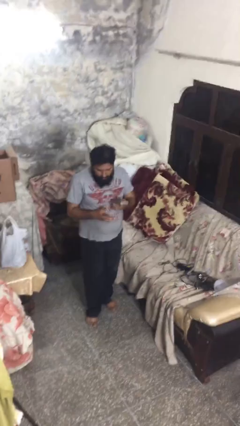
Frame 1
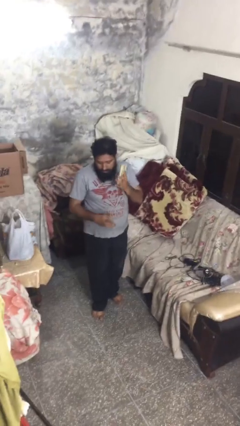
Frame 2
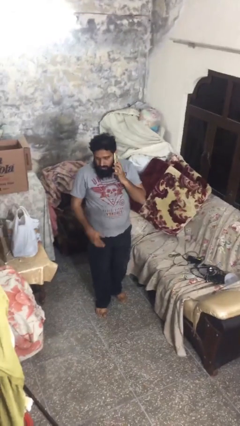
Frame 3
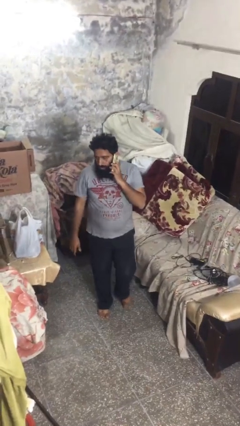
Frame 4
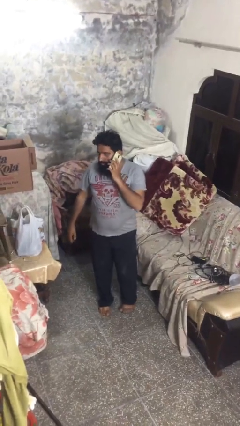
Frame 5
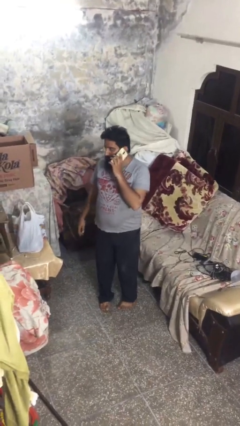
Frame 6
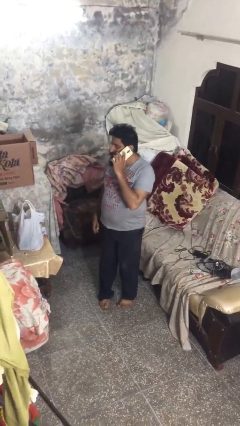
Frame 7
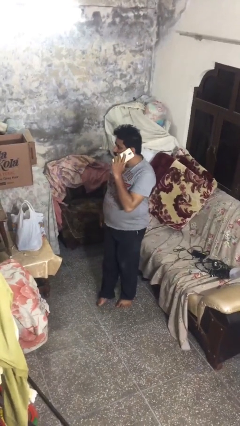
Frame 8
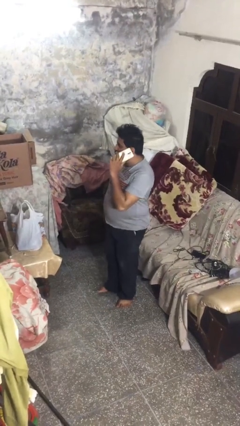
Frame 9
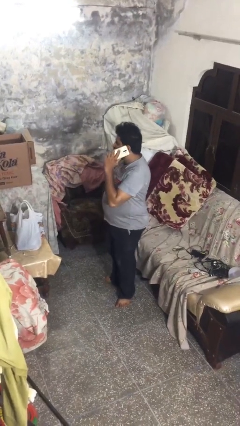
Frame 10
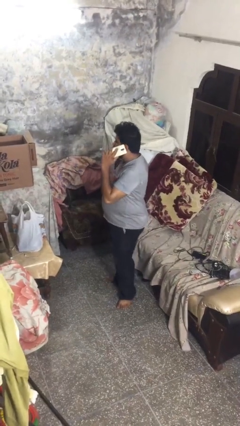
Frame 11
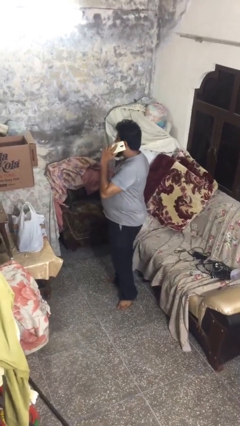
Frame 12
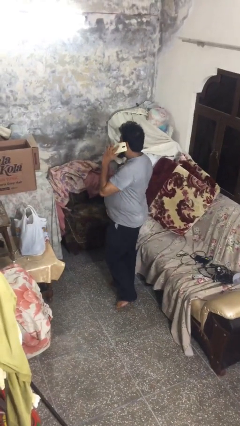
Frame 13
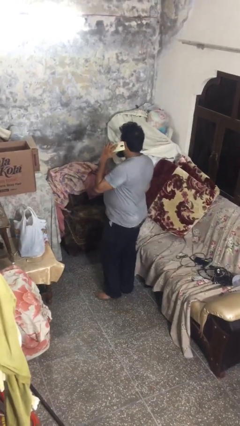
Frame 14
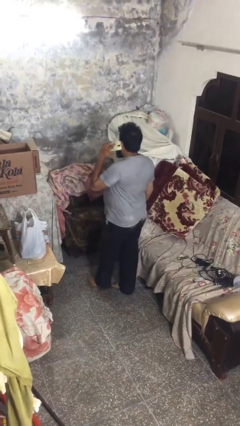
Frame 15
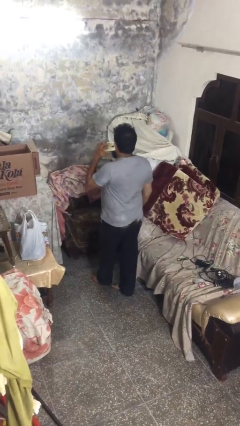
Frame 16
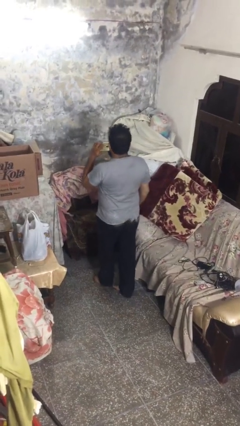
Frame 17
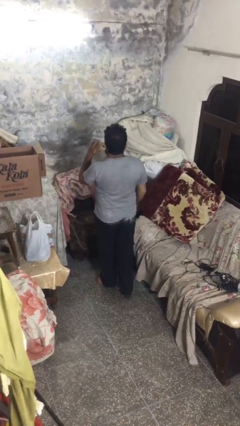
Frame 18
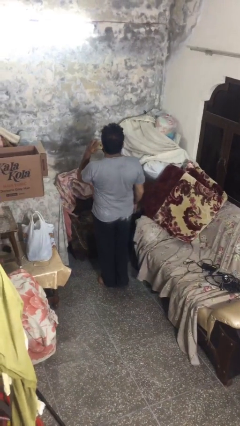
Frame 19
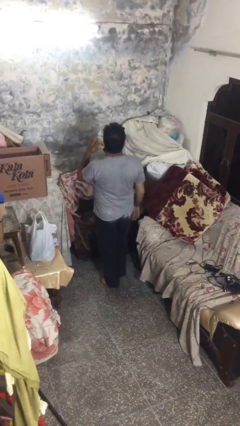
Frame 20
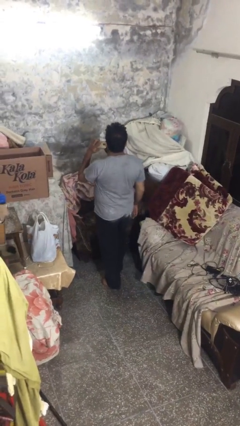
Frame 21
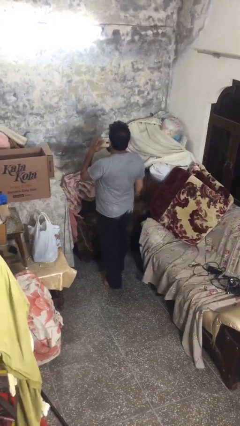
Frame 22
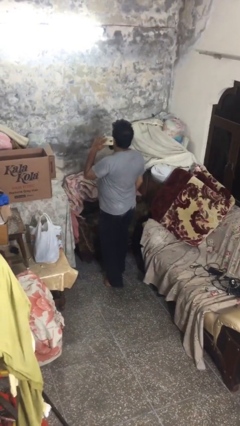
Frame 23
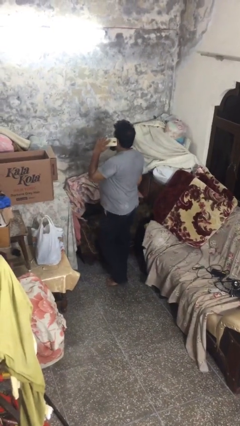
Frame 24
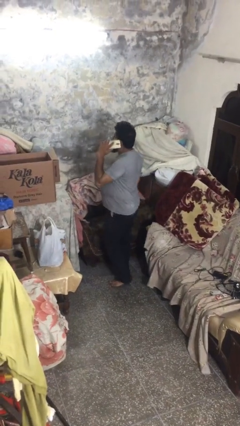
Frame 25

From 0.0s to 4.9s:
person talks on phone

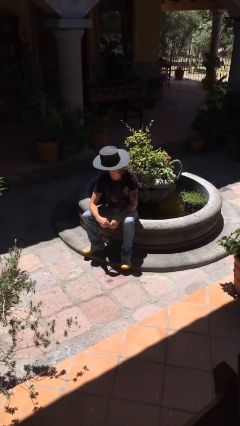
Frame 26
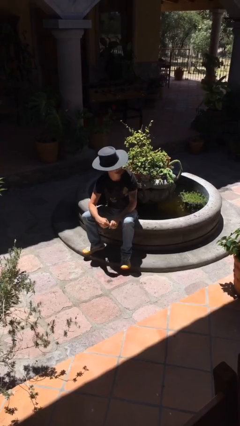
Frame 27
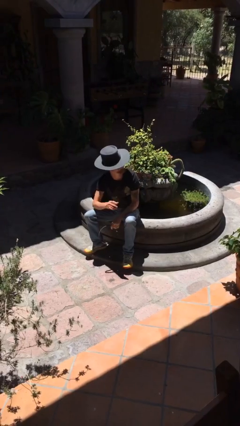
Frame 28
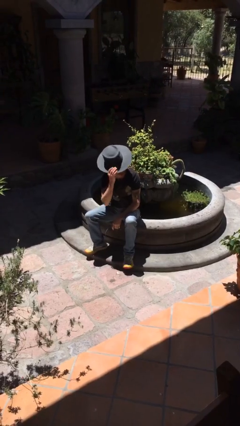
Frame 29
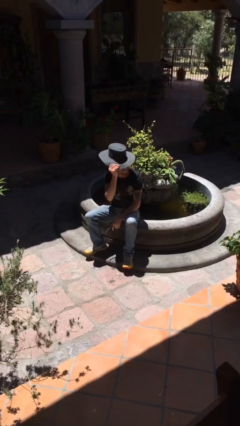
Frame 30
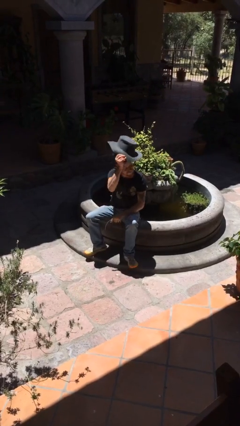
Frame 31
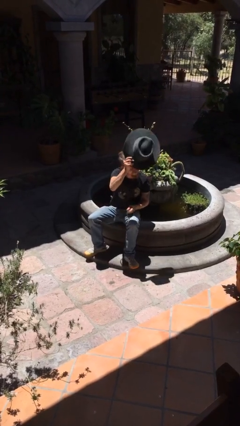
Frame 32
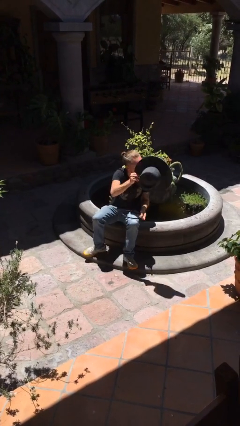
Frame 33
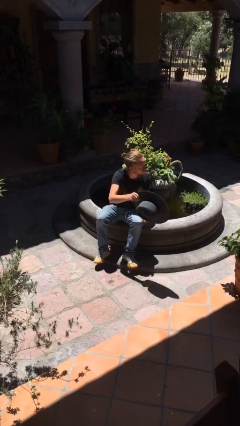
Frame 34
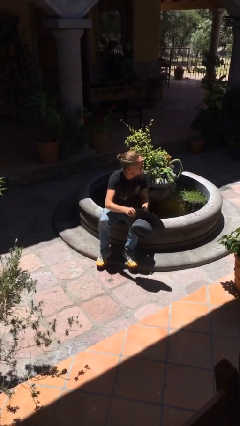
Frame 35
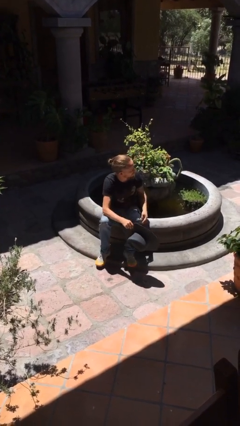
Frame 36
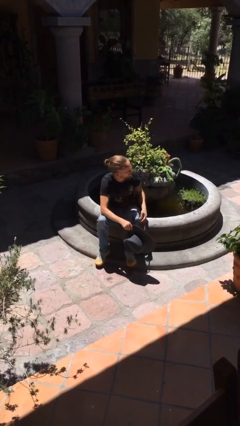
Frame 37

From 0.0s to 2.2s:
person takes off hat

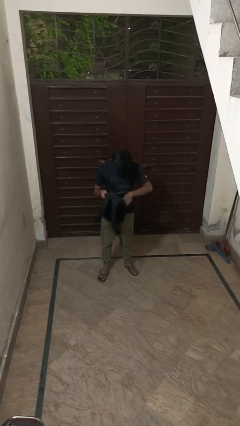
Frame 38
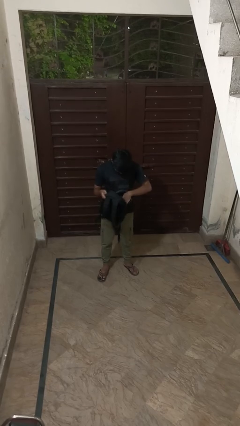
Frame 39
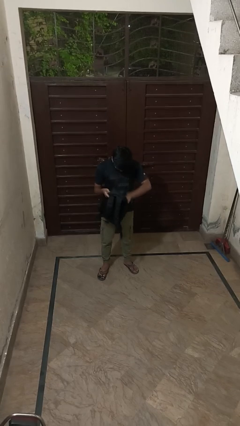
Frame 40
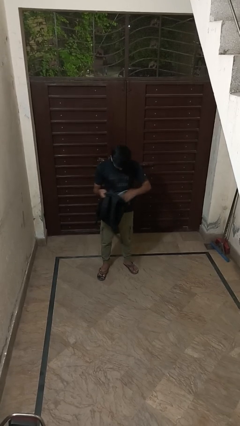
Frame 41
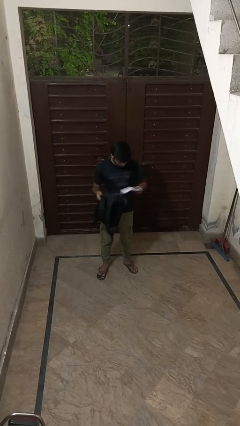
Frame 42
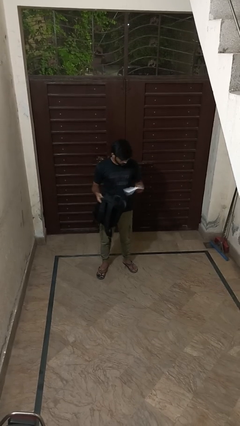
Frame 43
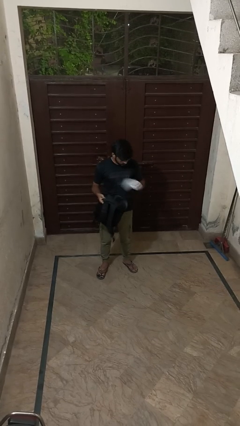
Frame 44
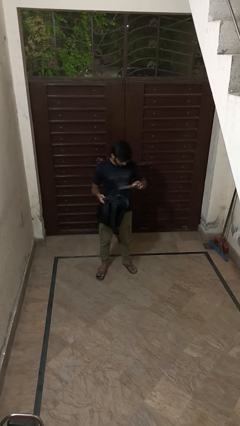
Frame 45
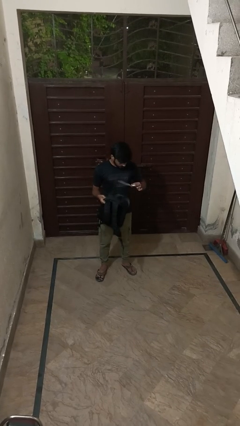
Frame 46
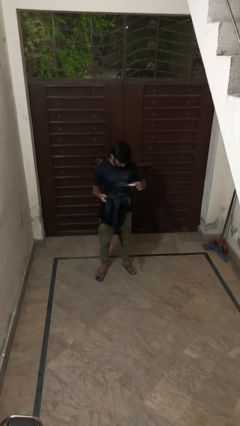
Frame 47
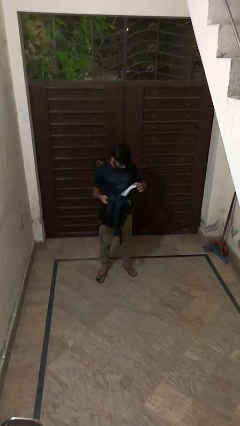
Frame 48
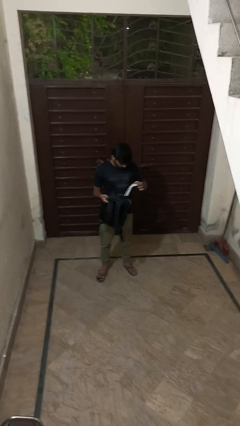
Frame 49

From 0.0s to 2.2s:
person takes object from backpack

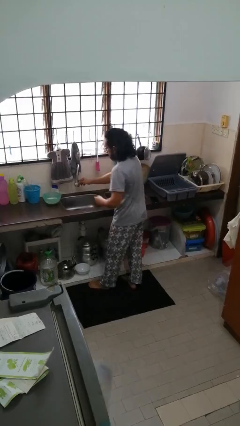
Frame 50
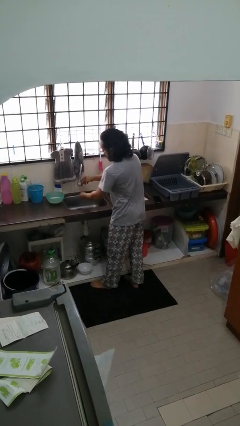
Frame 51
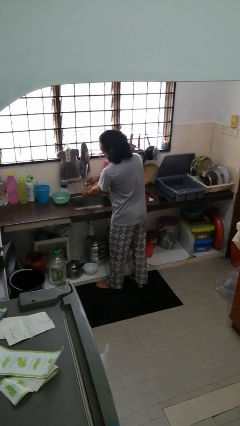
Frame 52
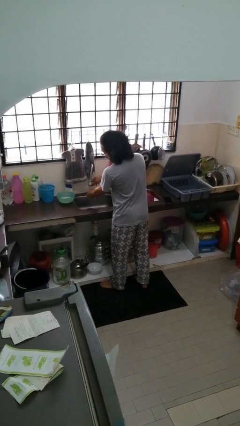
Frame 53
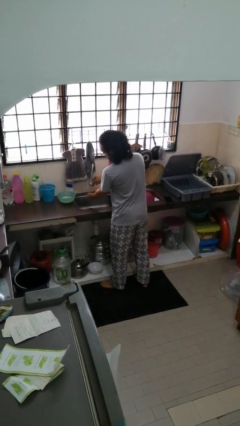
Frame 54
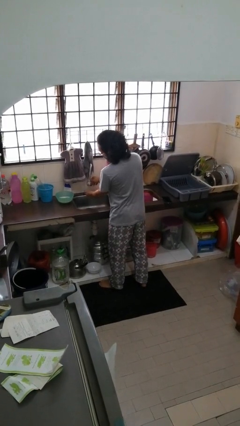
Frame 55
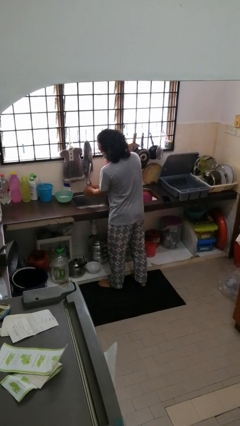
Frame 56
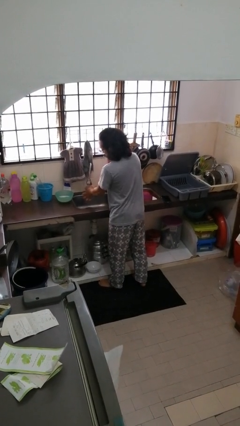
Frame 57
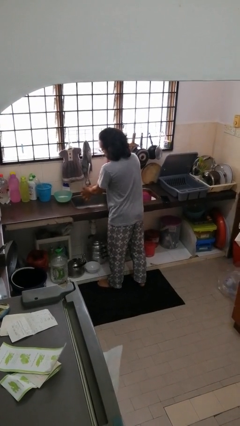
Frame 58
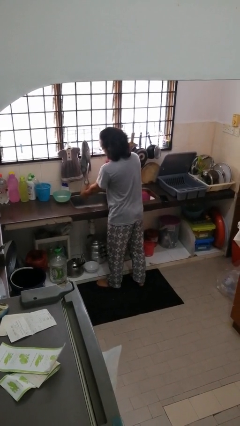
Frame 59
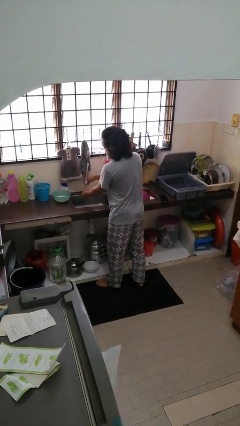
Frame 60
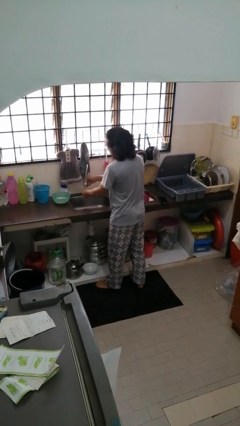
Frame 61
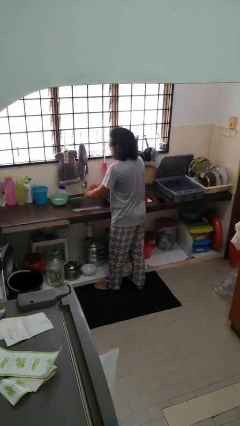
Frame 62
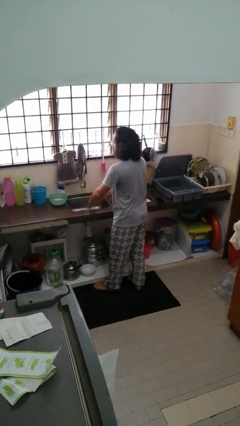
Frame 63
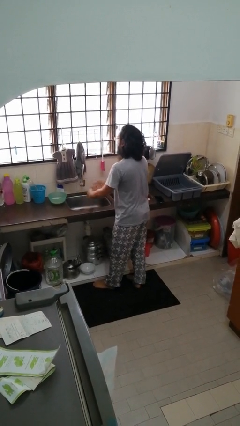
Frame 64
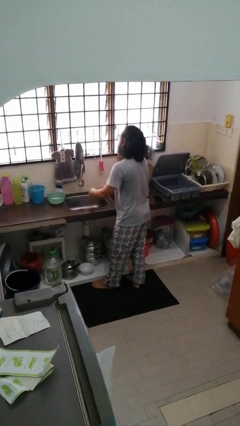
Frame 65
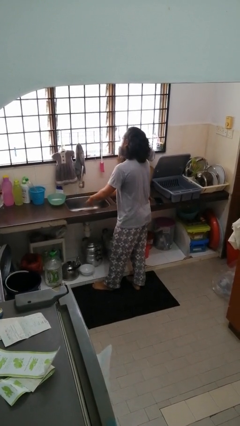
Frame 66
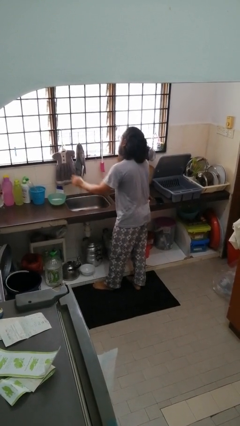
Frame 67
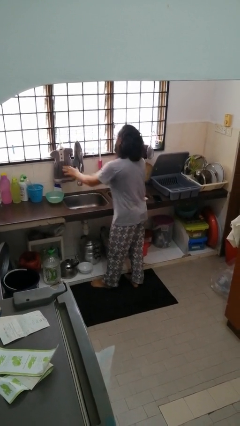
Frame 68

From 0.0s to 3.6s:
person washes hands

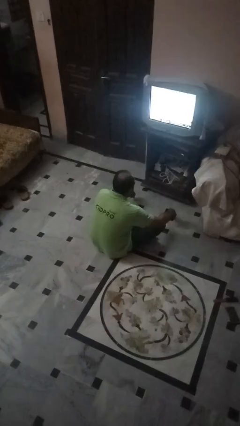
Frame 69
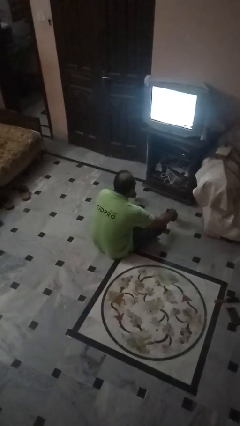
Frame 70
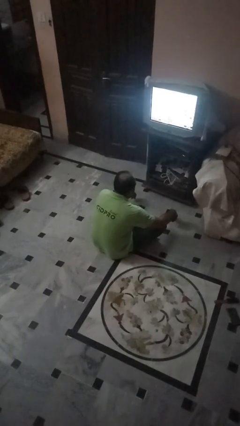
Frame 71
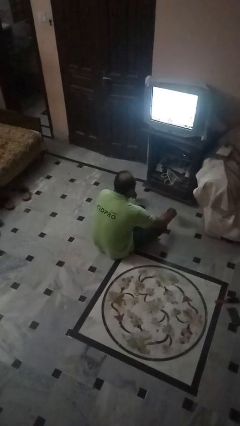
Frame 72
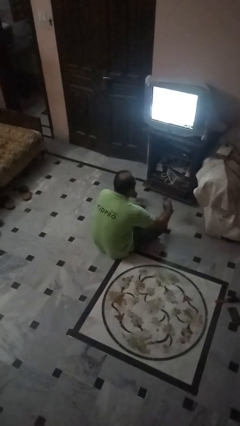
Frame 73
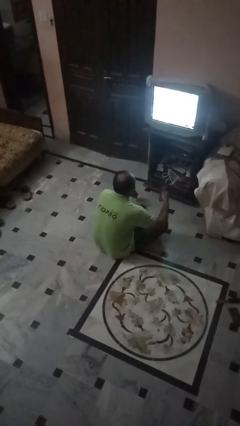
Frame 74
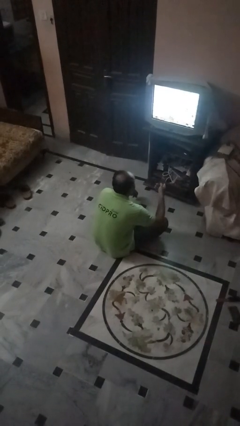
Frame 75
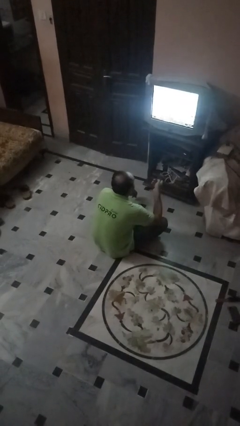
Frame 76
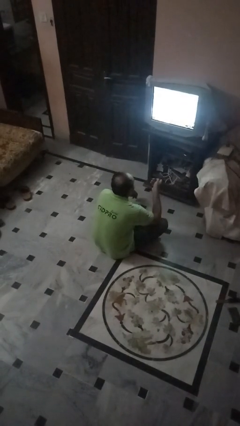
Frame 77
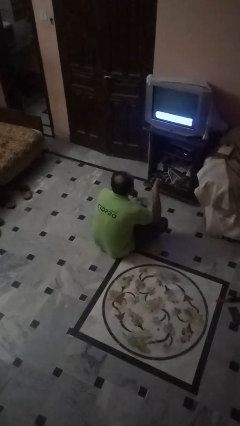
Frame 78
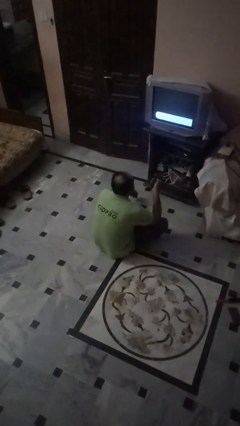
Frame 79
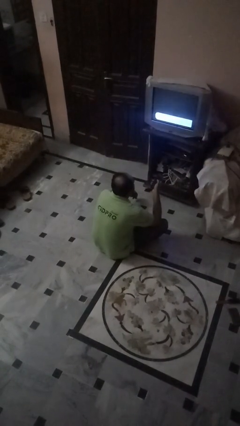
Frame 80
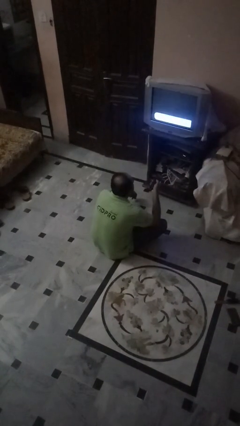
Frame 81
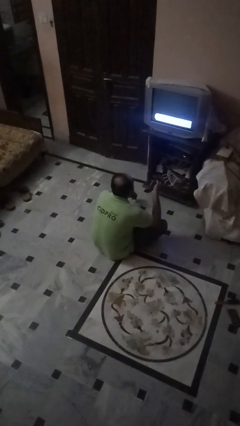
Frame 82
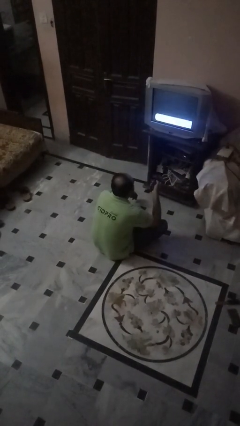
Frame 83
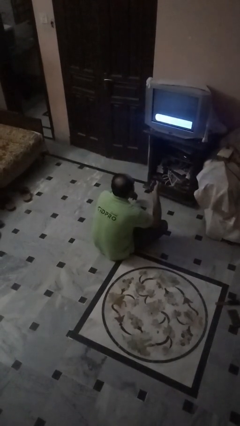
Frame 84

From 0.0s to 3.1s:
person uses television remote

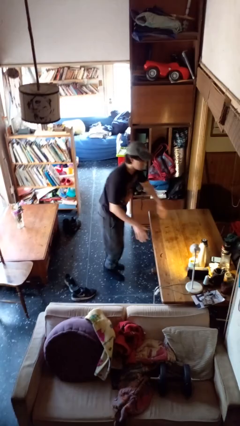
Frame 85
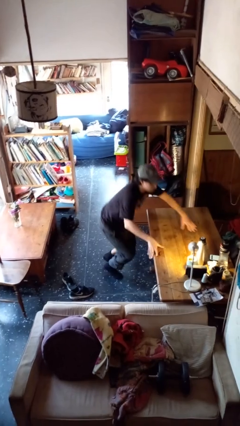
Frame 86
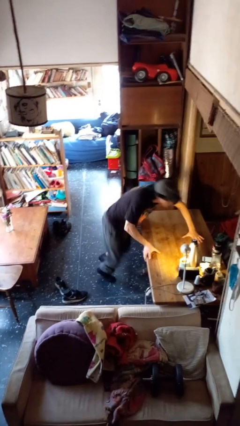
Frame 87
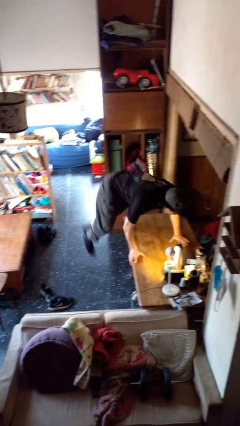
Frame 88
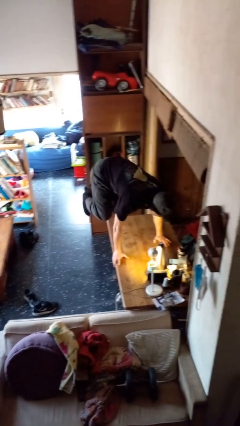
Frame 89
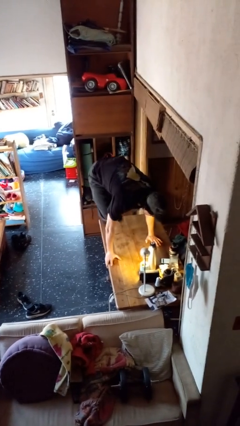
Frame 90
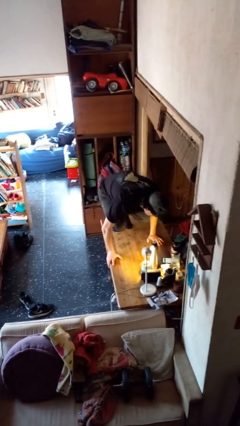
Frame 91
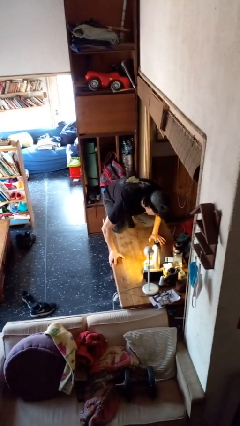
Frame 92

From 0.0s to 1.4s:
person climbs on table
